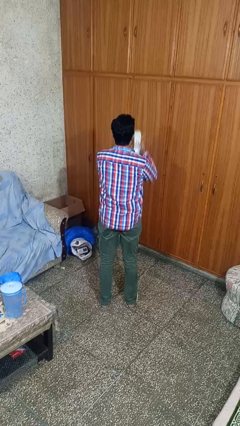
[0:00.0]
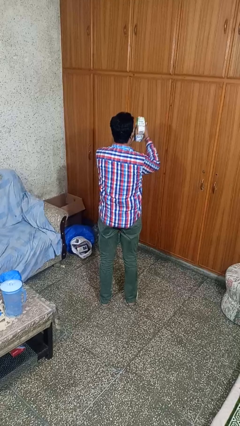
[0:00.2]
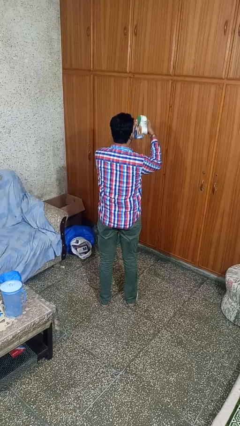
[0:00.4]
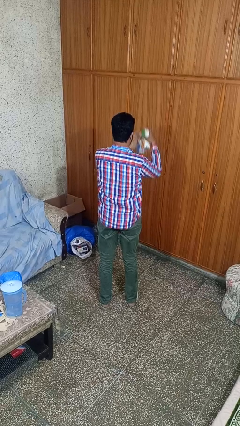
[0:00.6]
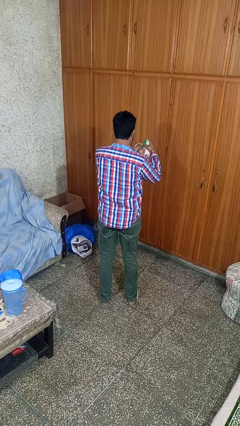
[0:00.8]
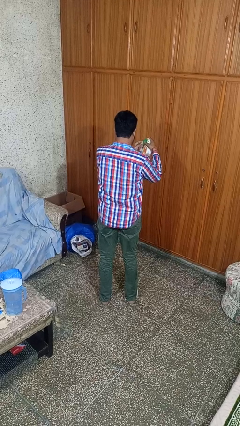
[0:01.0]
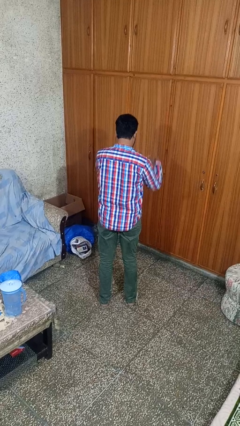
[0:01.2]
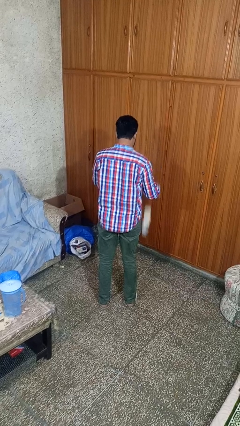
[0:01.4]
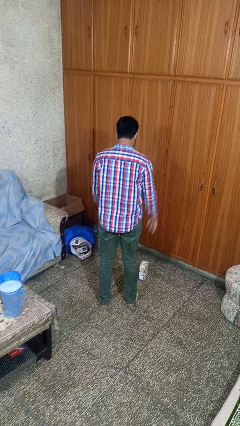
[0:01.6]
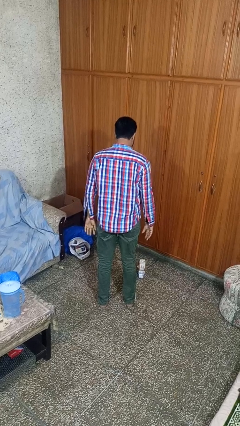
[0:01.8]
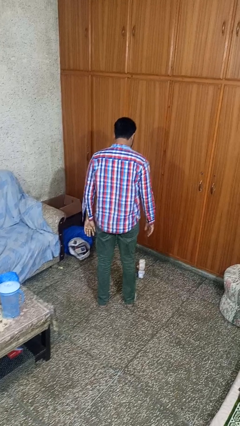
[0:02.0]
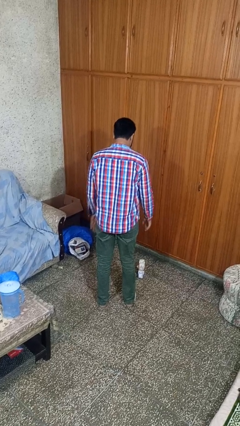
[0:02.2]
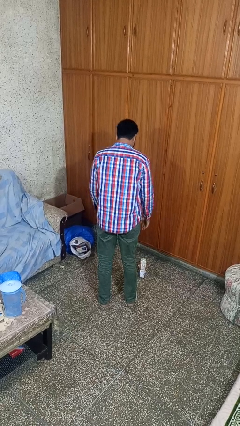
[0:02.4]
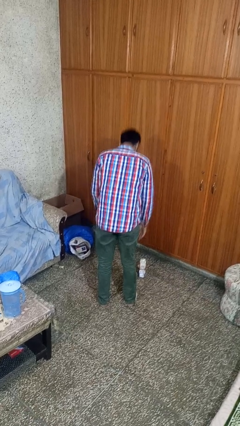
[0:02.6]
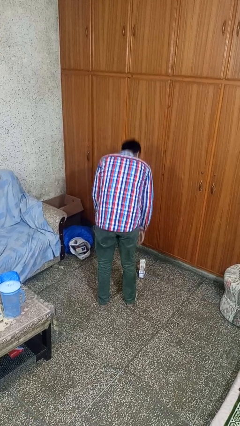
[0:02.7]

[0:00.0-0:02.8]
person catches dropped object

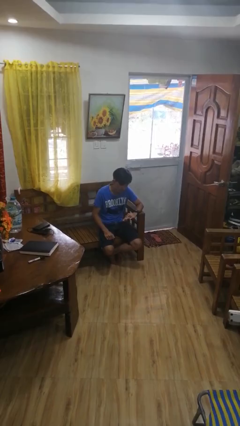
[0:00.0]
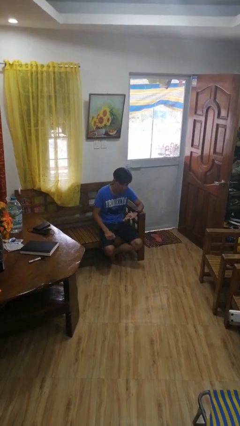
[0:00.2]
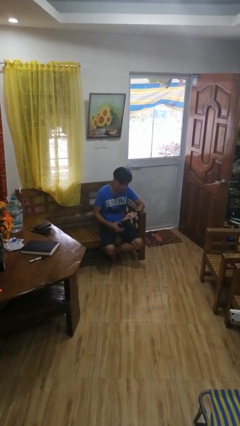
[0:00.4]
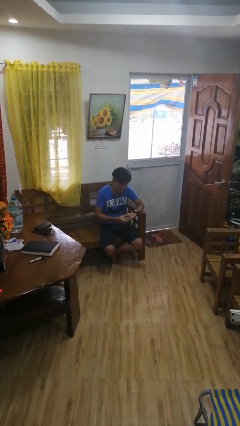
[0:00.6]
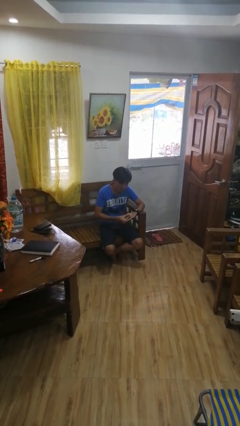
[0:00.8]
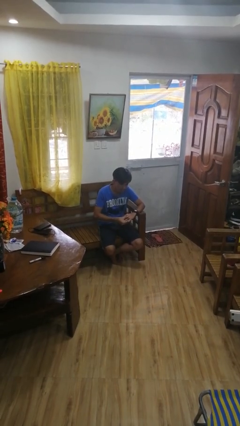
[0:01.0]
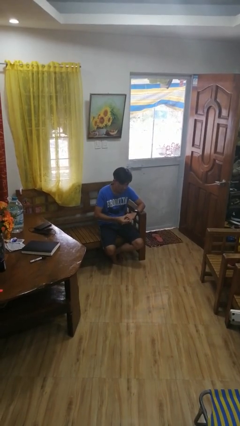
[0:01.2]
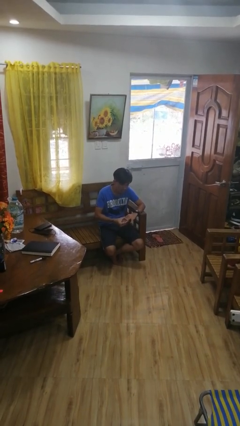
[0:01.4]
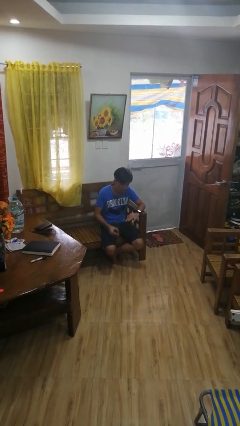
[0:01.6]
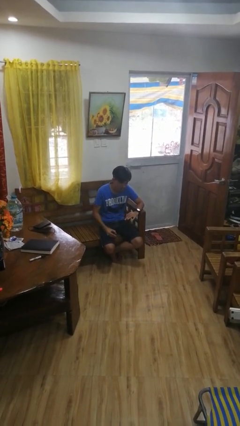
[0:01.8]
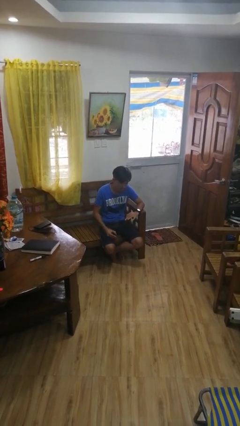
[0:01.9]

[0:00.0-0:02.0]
person takes off ring

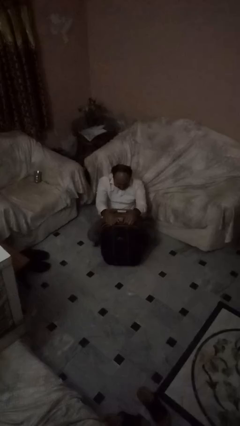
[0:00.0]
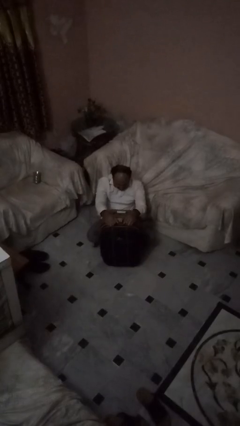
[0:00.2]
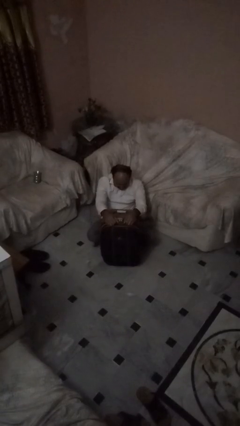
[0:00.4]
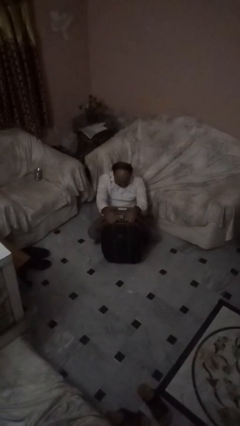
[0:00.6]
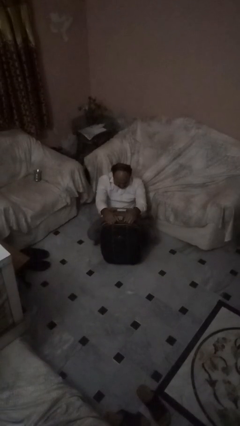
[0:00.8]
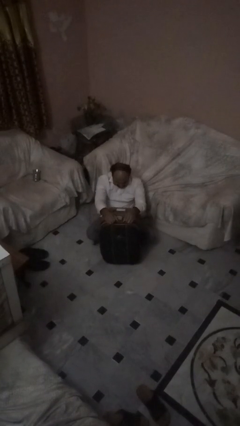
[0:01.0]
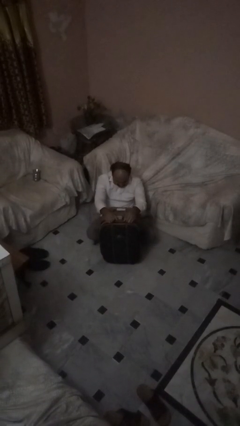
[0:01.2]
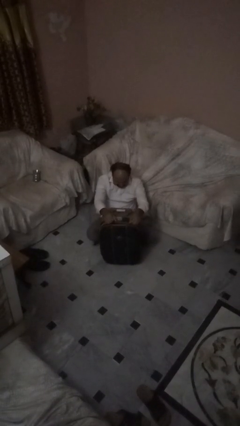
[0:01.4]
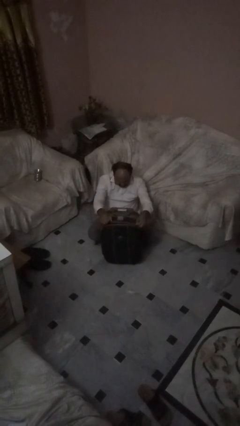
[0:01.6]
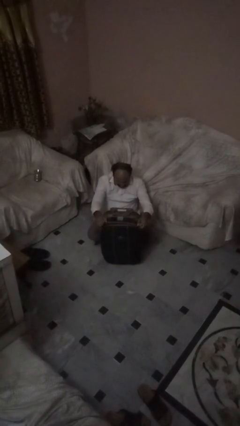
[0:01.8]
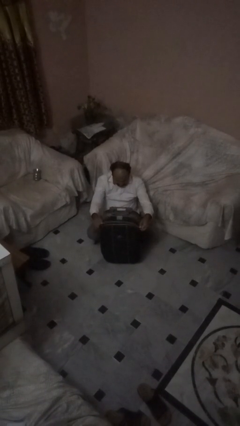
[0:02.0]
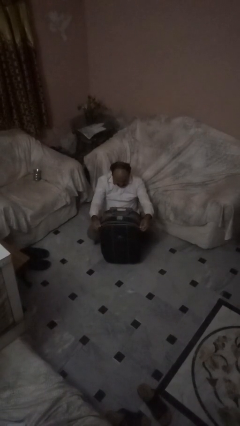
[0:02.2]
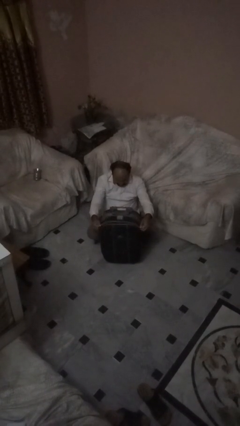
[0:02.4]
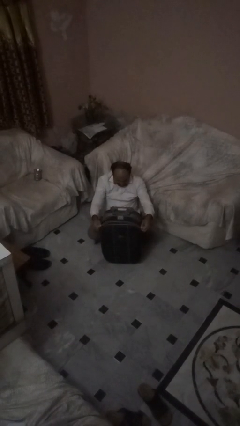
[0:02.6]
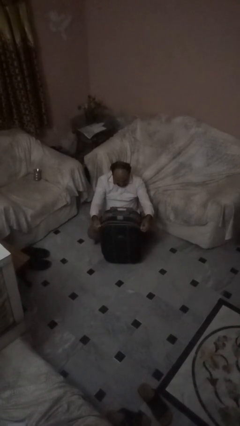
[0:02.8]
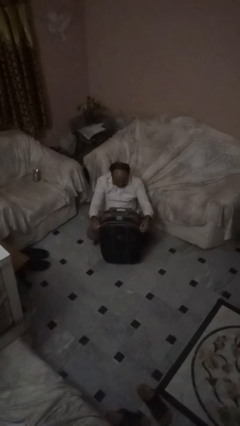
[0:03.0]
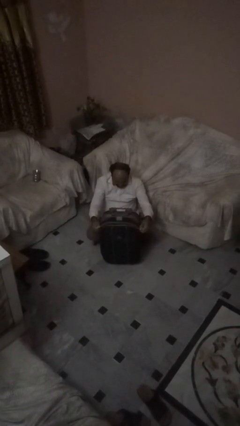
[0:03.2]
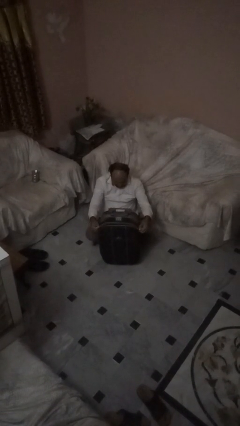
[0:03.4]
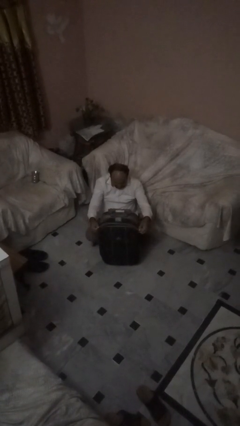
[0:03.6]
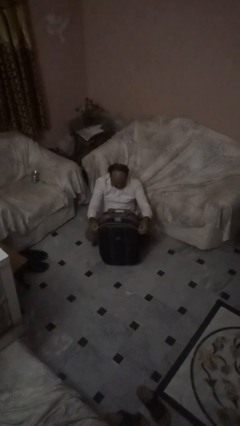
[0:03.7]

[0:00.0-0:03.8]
person opens suitcase

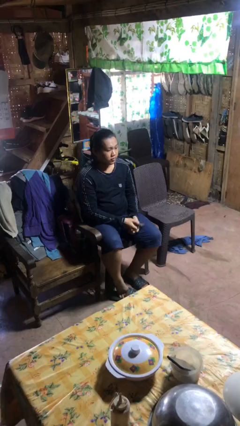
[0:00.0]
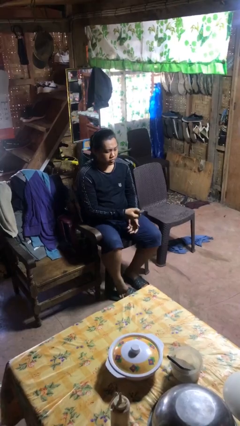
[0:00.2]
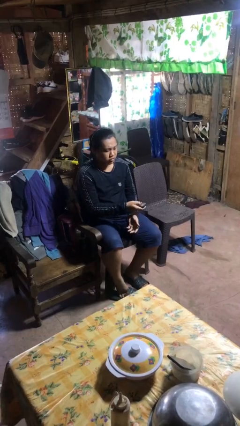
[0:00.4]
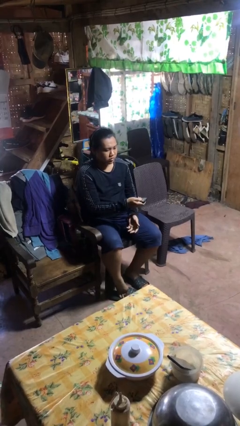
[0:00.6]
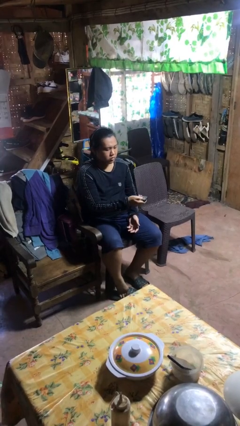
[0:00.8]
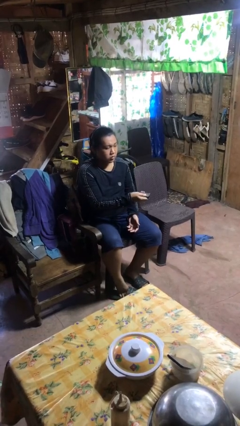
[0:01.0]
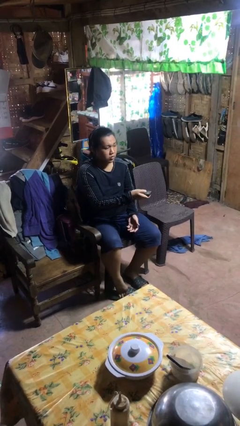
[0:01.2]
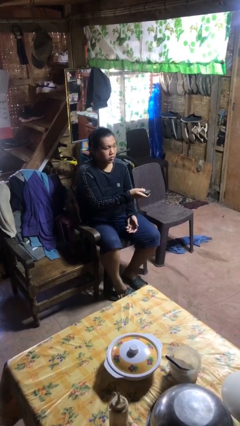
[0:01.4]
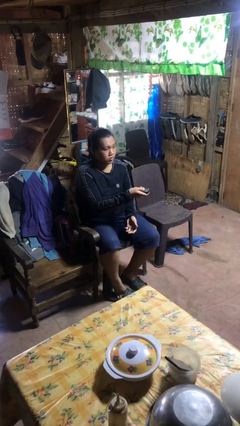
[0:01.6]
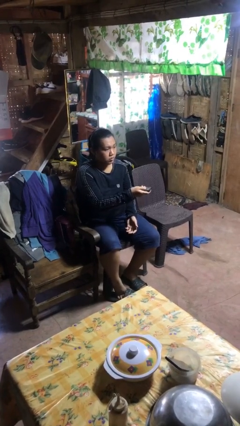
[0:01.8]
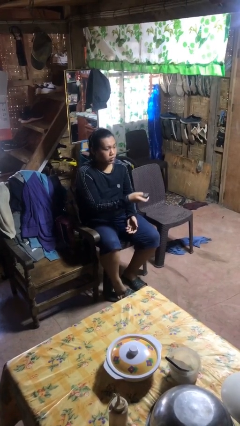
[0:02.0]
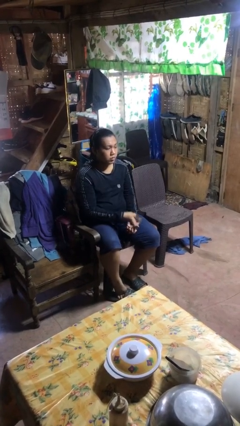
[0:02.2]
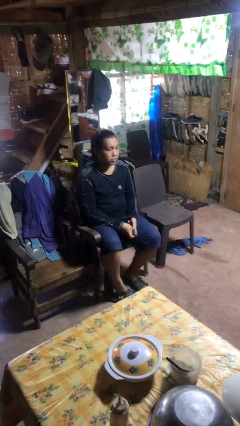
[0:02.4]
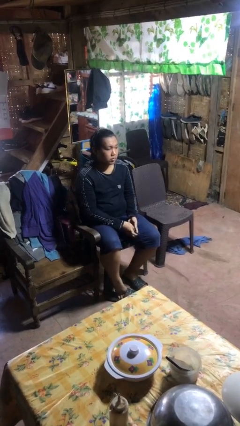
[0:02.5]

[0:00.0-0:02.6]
person uses television remote

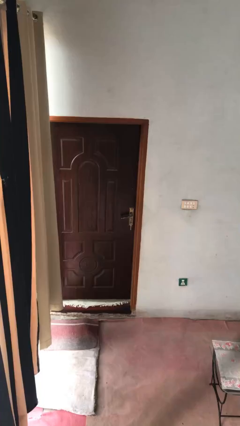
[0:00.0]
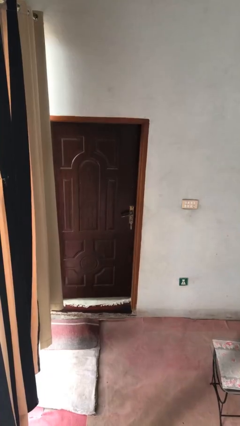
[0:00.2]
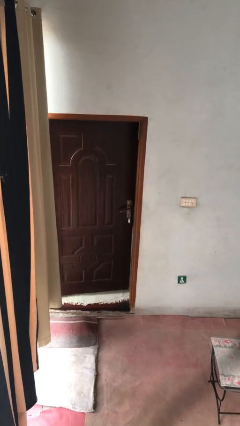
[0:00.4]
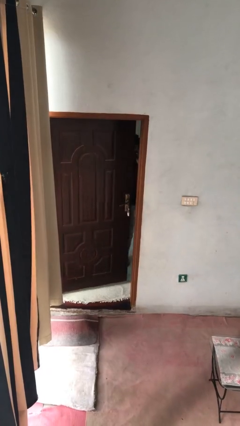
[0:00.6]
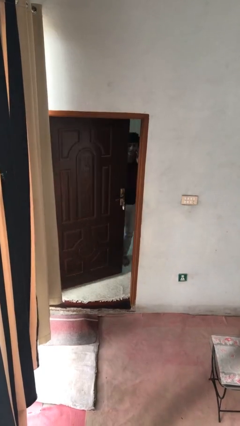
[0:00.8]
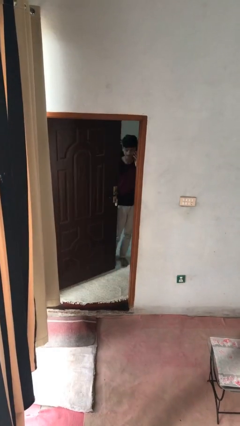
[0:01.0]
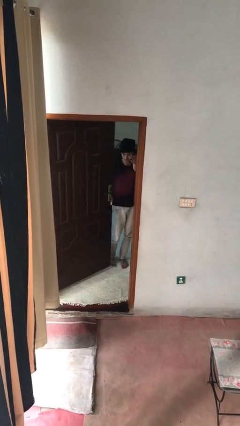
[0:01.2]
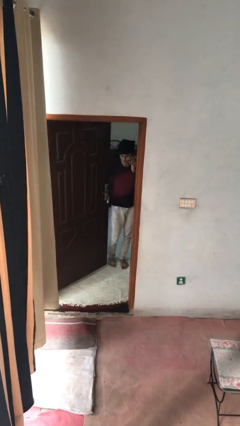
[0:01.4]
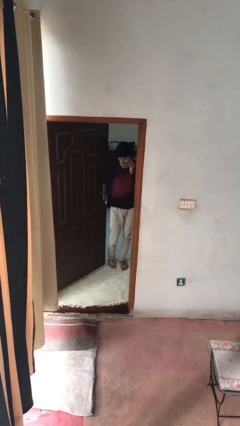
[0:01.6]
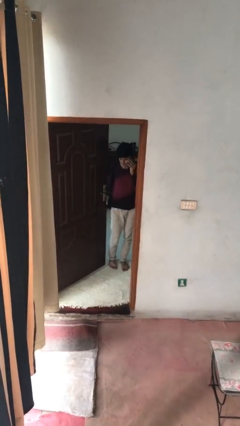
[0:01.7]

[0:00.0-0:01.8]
person opens facility door

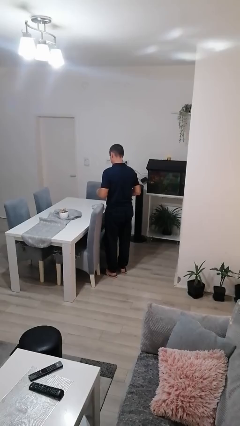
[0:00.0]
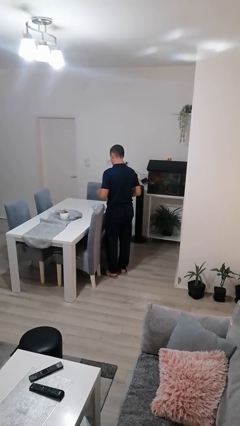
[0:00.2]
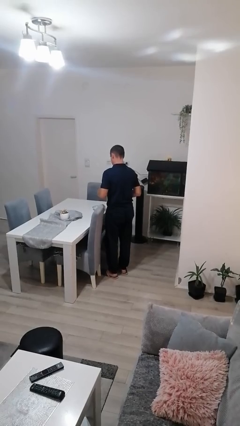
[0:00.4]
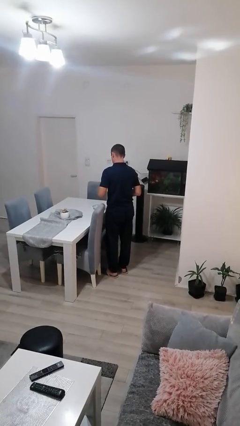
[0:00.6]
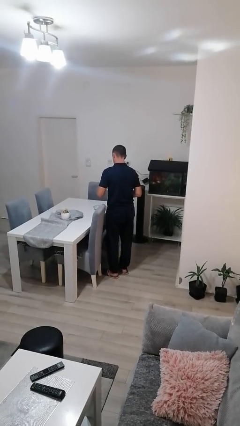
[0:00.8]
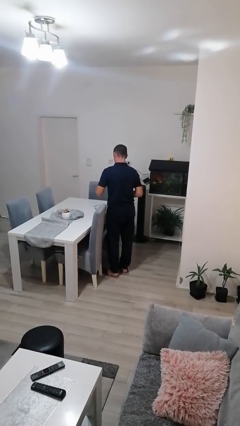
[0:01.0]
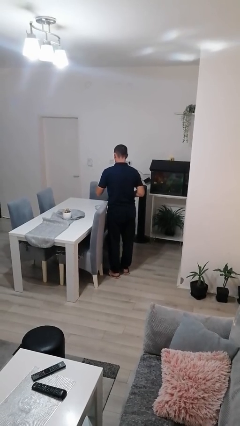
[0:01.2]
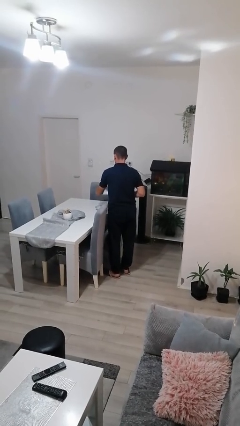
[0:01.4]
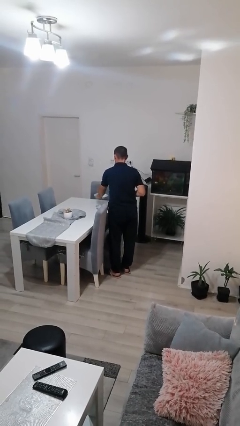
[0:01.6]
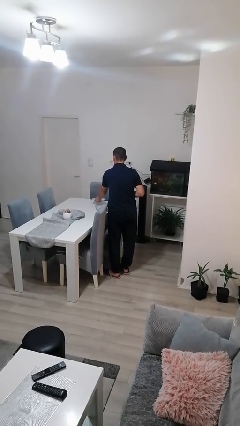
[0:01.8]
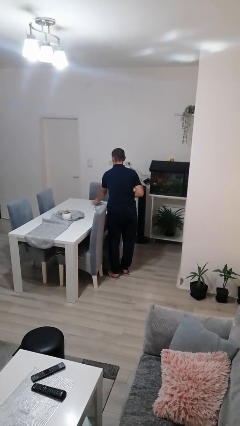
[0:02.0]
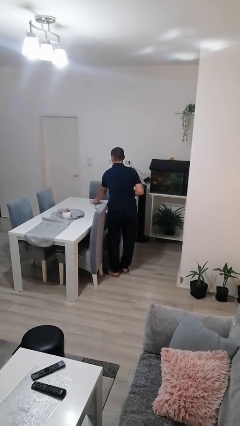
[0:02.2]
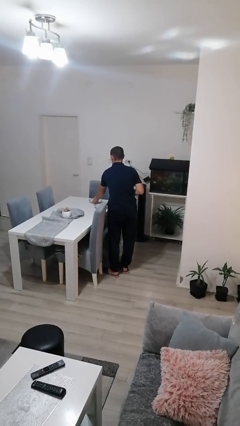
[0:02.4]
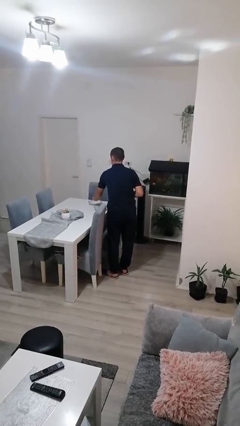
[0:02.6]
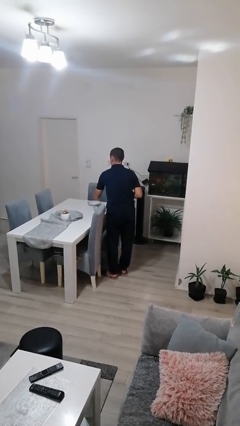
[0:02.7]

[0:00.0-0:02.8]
person sets table

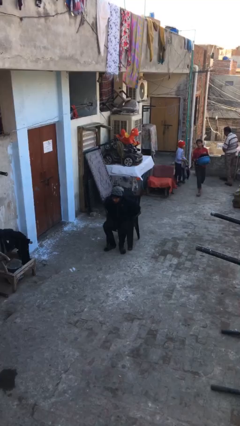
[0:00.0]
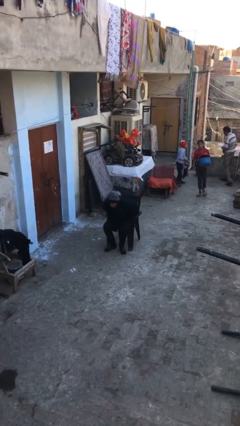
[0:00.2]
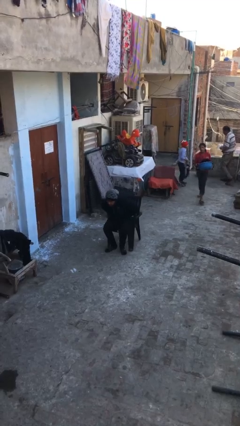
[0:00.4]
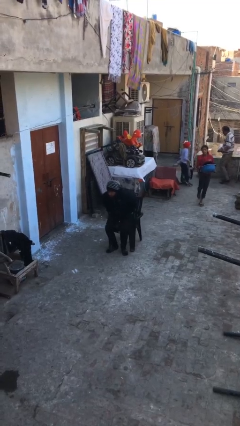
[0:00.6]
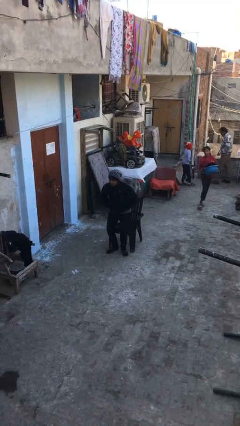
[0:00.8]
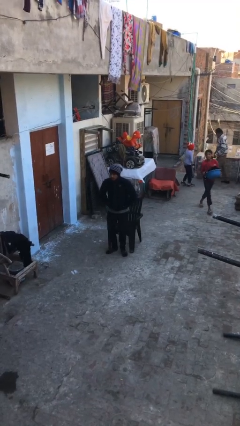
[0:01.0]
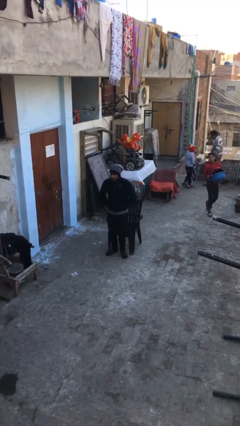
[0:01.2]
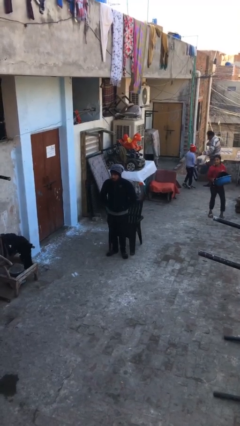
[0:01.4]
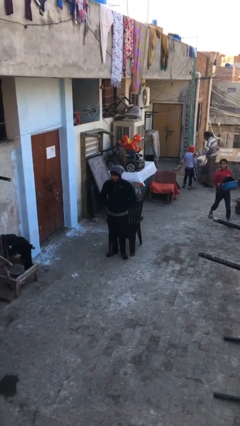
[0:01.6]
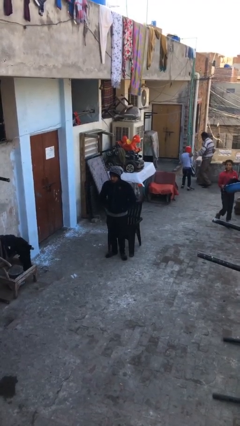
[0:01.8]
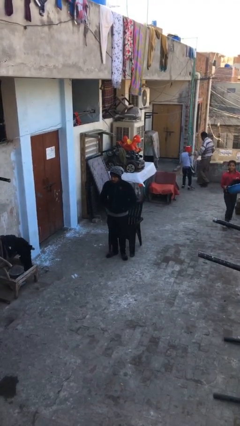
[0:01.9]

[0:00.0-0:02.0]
person stands up
